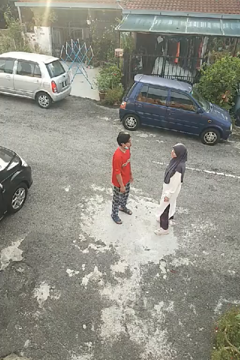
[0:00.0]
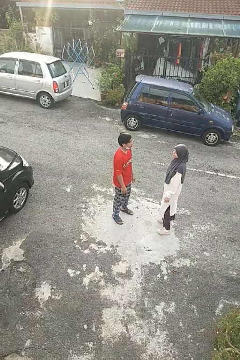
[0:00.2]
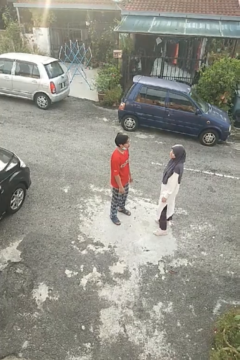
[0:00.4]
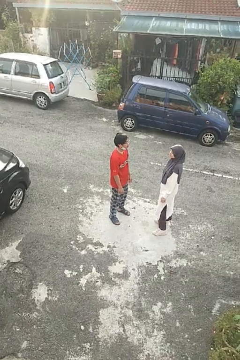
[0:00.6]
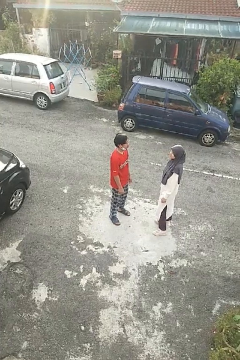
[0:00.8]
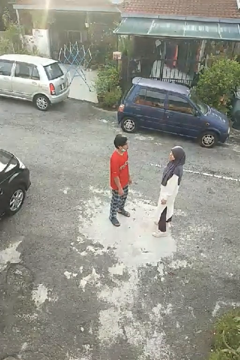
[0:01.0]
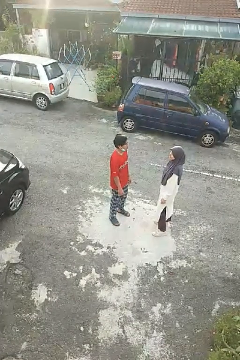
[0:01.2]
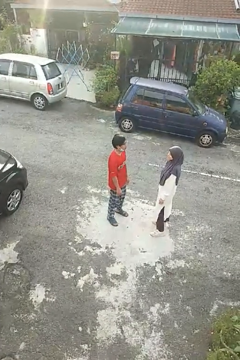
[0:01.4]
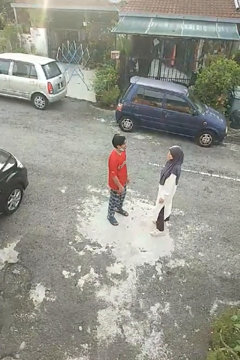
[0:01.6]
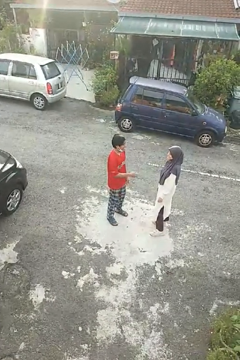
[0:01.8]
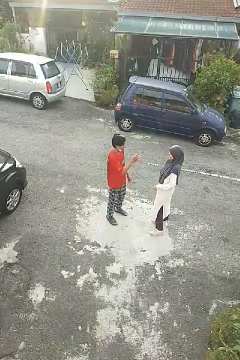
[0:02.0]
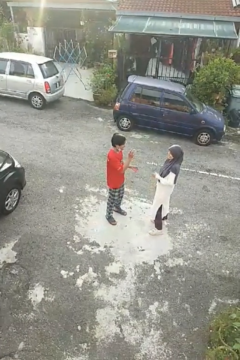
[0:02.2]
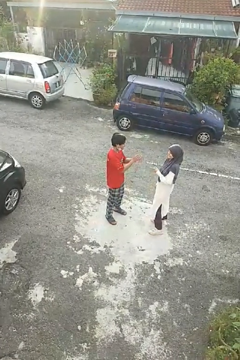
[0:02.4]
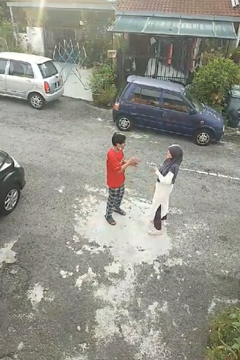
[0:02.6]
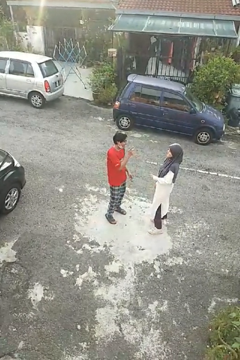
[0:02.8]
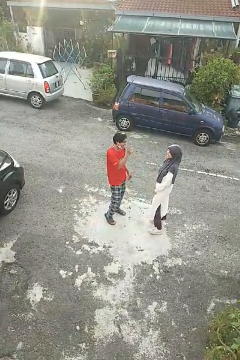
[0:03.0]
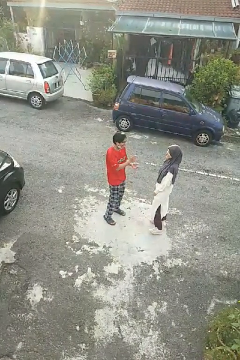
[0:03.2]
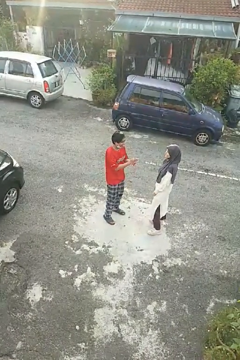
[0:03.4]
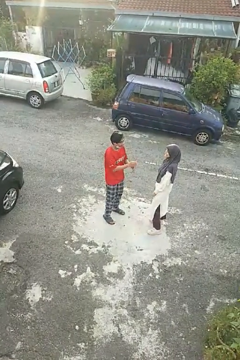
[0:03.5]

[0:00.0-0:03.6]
person laughs with person

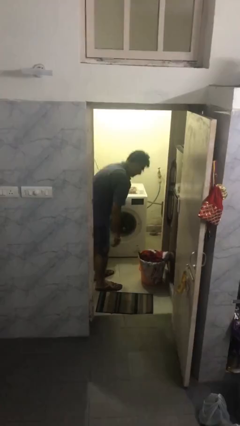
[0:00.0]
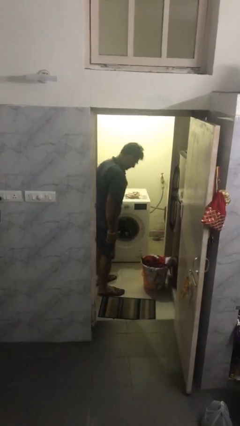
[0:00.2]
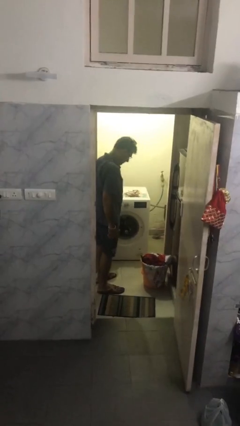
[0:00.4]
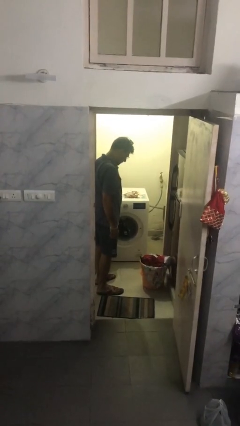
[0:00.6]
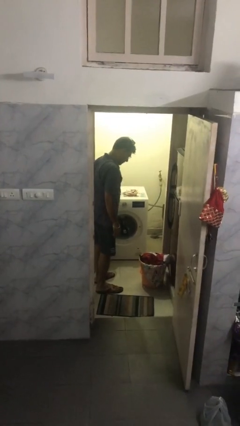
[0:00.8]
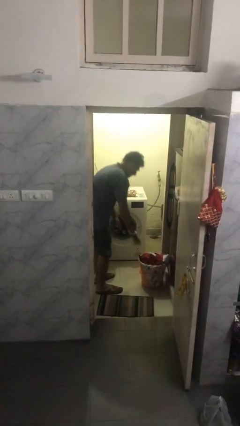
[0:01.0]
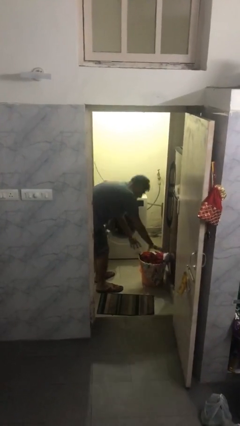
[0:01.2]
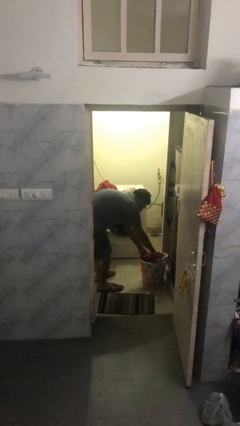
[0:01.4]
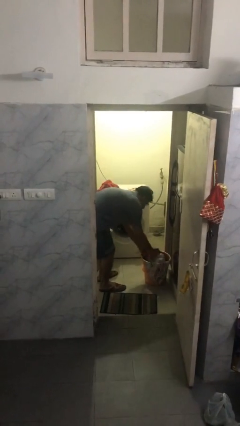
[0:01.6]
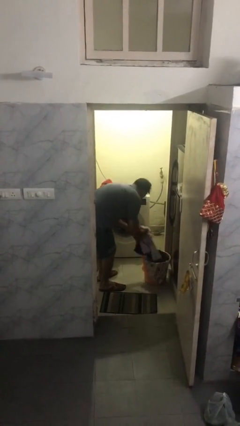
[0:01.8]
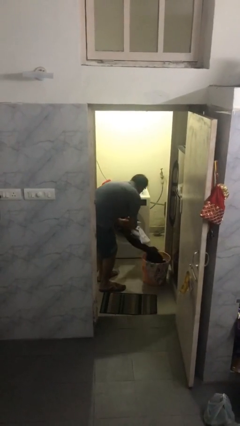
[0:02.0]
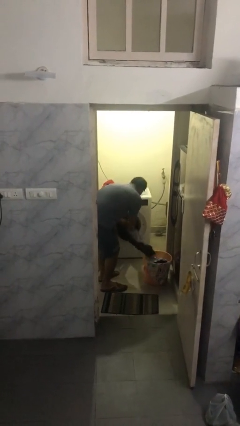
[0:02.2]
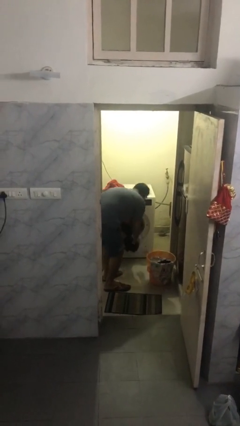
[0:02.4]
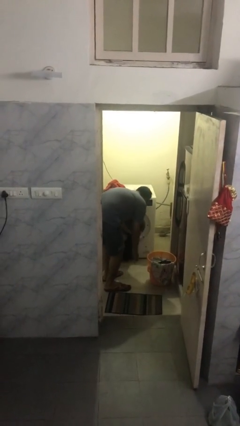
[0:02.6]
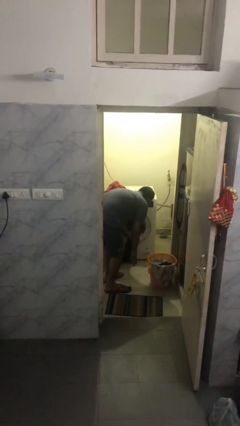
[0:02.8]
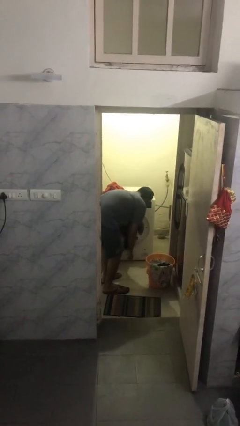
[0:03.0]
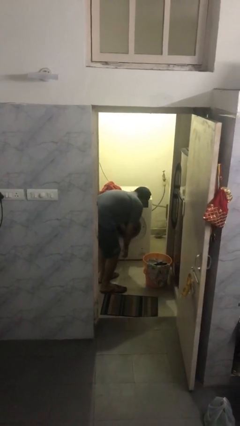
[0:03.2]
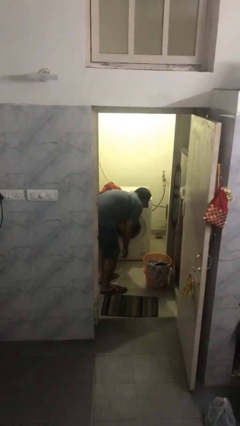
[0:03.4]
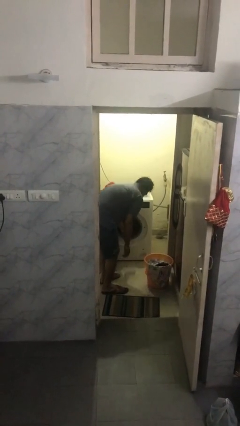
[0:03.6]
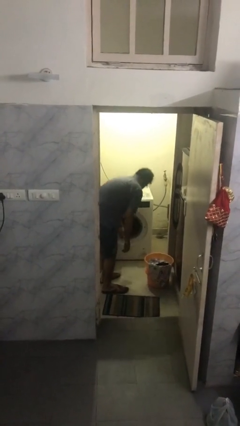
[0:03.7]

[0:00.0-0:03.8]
person loads clotheswasher

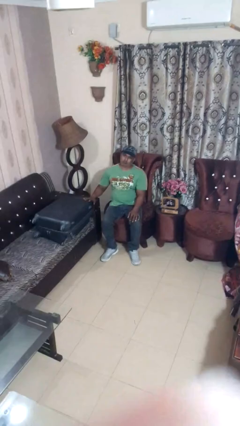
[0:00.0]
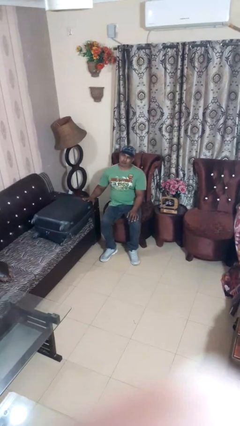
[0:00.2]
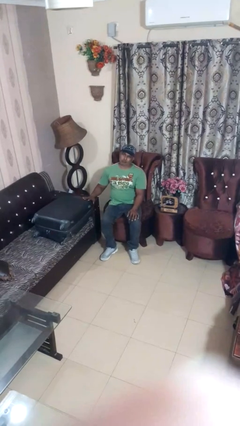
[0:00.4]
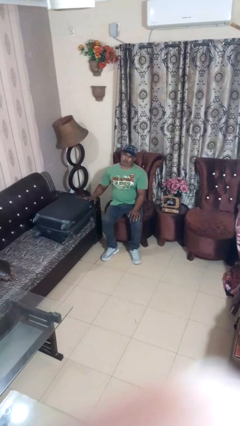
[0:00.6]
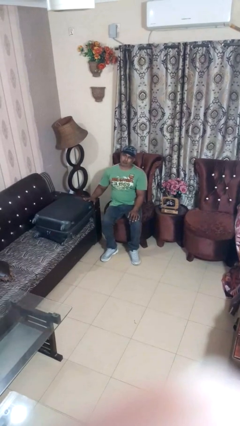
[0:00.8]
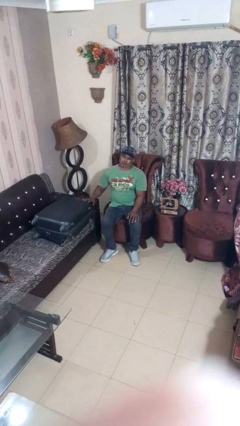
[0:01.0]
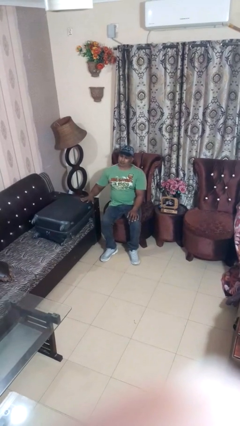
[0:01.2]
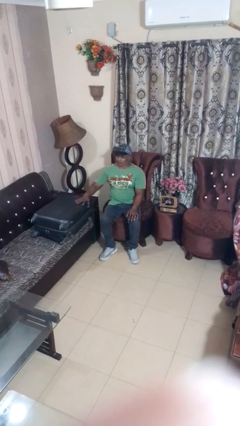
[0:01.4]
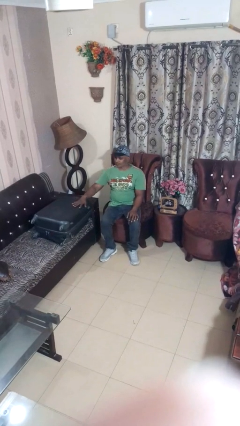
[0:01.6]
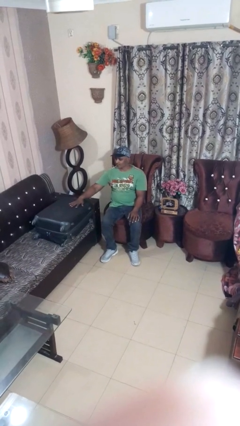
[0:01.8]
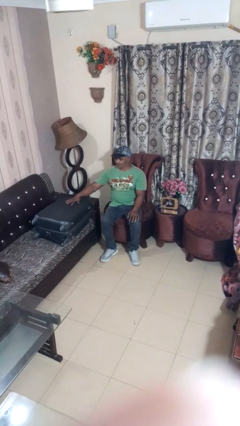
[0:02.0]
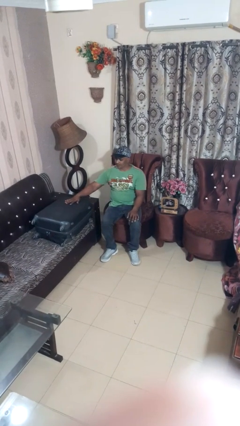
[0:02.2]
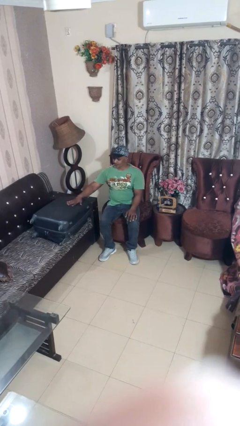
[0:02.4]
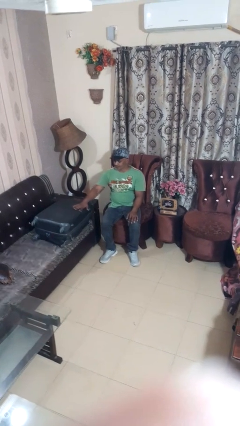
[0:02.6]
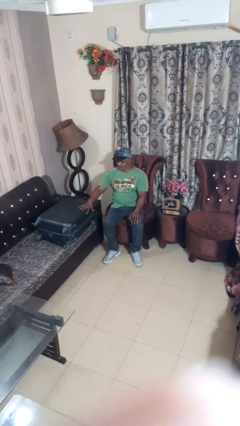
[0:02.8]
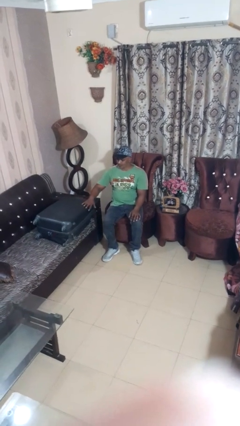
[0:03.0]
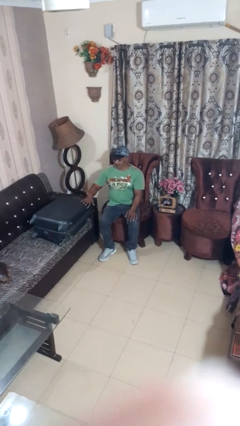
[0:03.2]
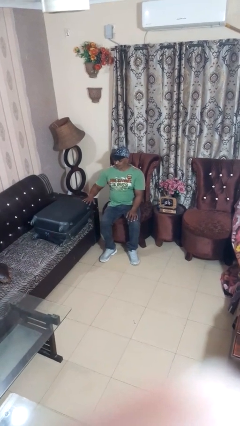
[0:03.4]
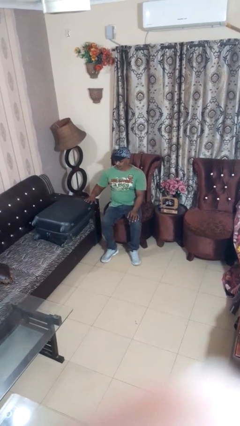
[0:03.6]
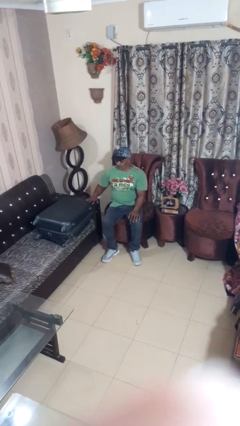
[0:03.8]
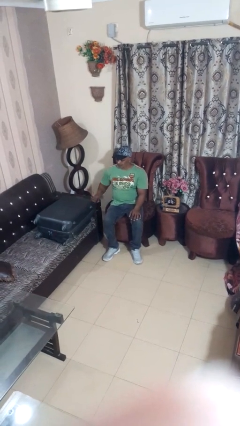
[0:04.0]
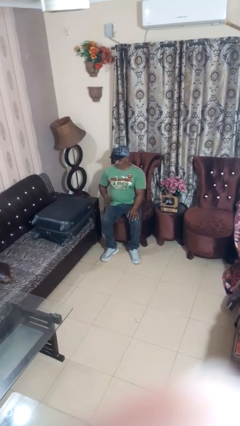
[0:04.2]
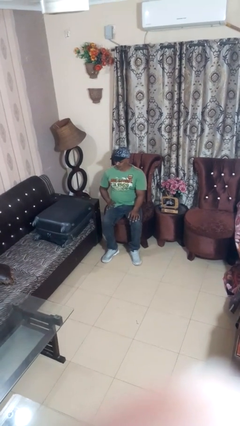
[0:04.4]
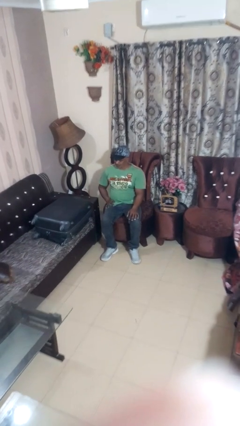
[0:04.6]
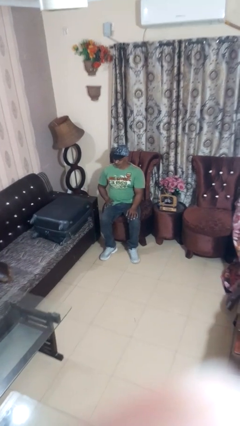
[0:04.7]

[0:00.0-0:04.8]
person waves hand over object

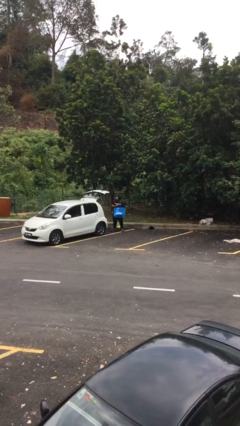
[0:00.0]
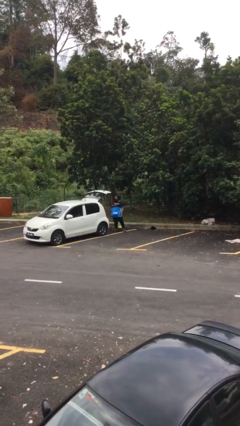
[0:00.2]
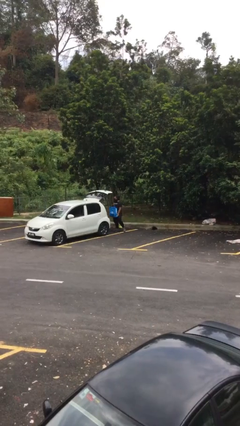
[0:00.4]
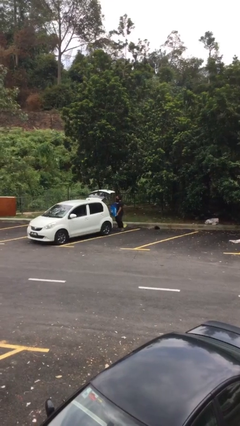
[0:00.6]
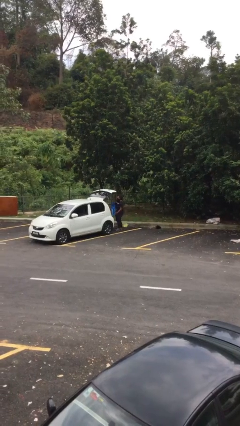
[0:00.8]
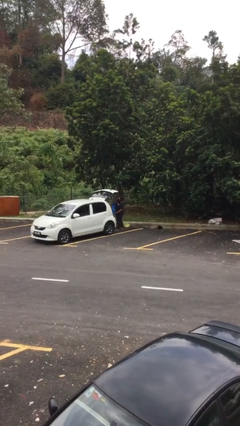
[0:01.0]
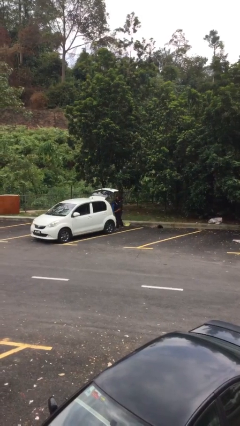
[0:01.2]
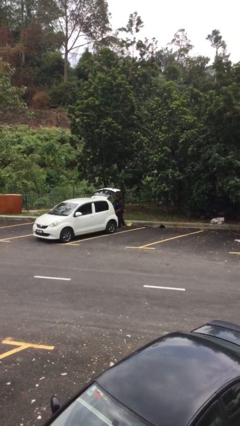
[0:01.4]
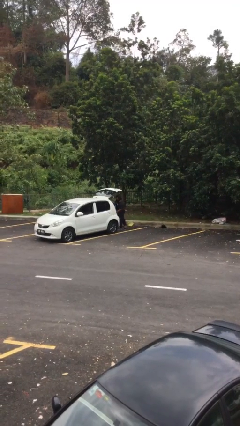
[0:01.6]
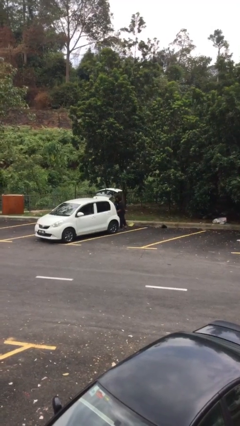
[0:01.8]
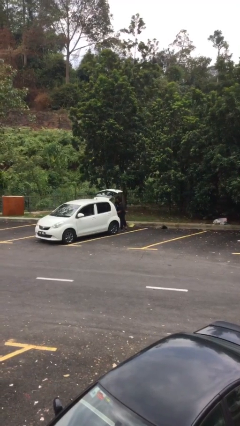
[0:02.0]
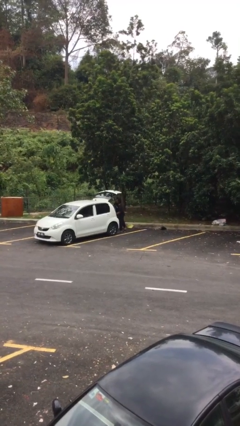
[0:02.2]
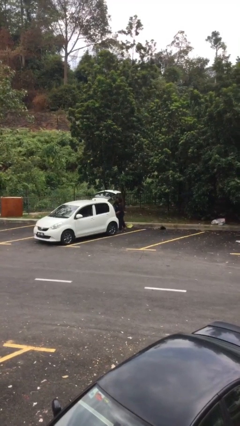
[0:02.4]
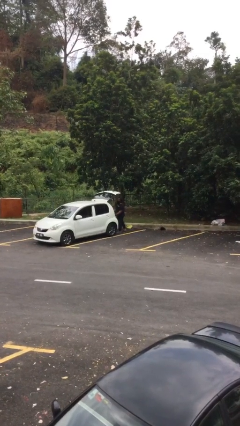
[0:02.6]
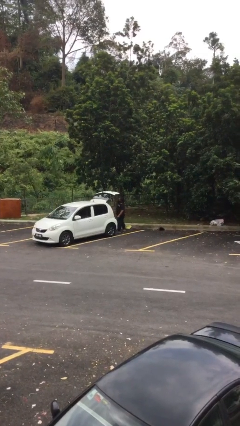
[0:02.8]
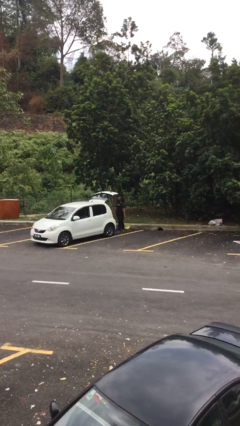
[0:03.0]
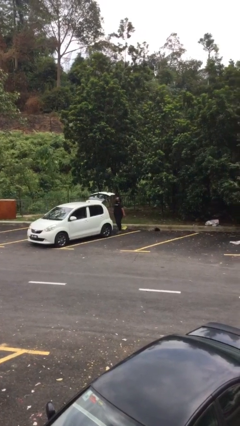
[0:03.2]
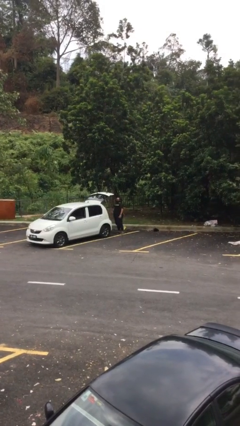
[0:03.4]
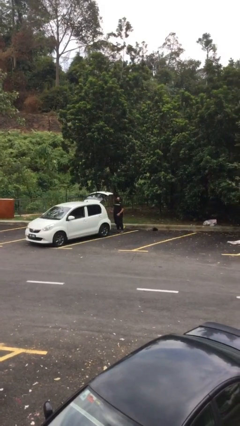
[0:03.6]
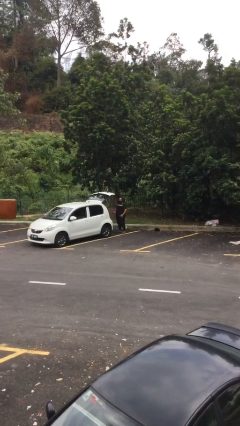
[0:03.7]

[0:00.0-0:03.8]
person loads car

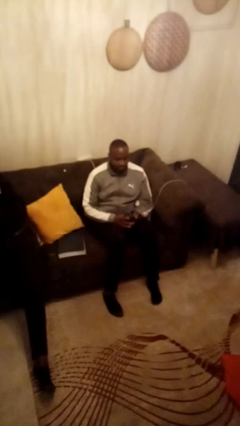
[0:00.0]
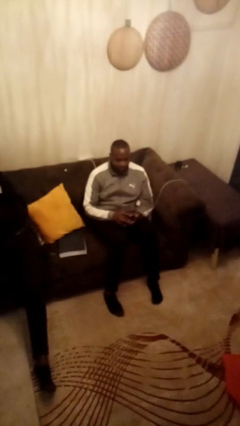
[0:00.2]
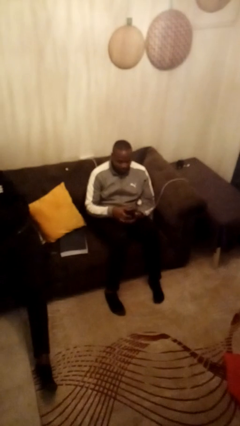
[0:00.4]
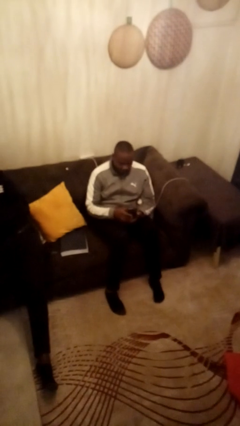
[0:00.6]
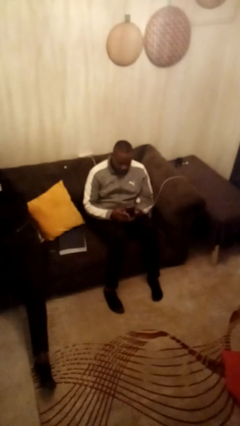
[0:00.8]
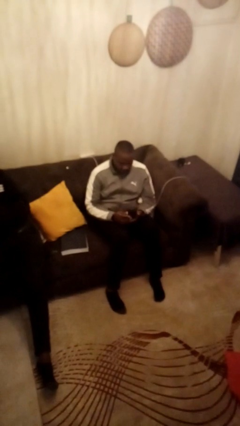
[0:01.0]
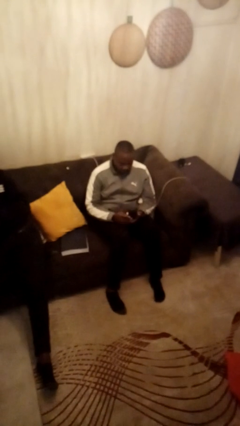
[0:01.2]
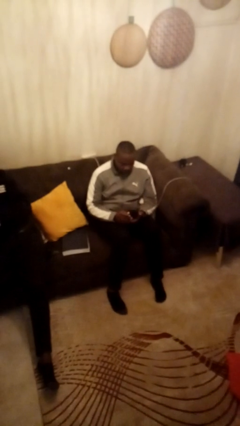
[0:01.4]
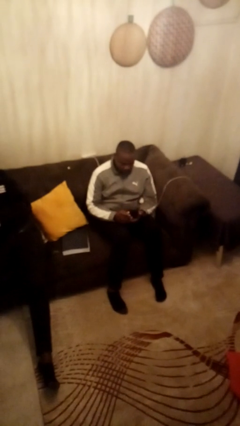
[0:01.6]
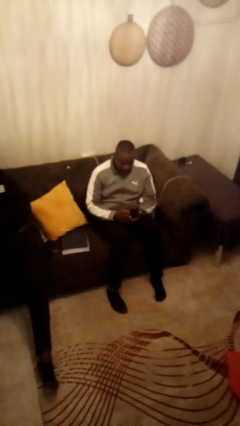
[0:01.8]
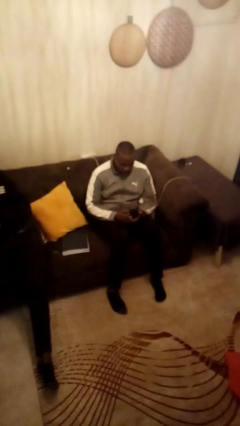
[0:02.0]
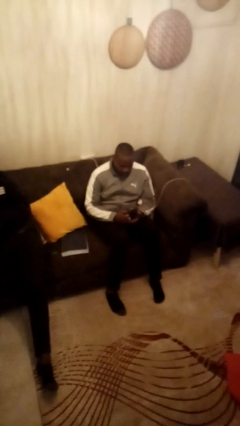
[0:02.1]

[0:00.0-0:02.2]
person opens jewelry box

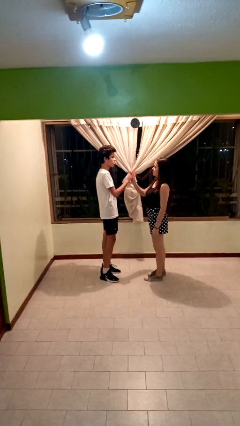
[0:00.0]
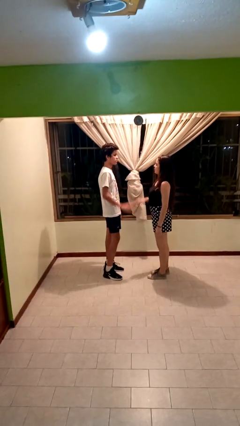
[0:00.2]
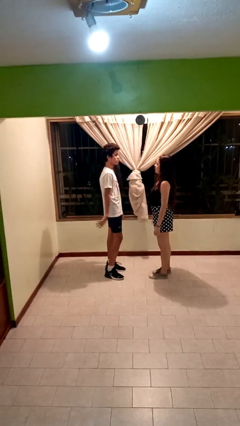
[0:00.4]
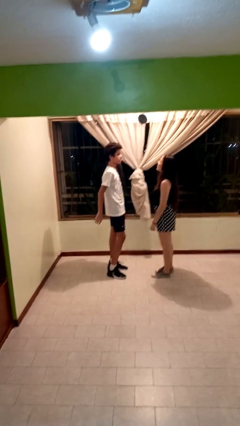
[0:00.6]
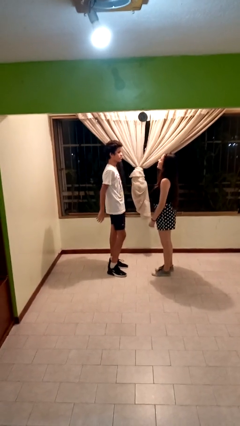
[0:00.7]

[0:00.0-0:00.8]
person highfives hand
